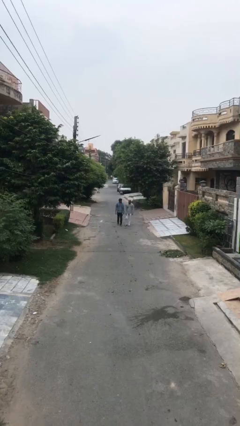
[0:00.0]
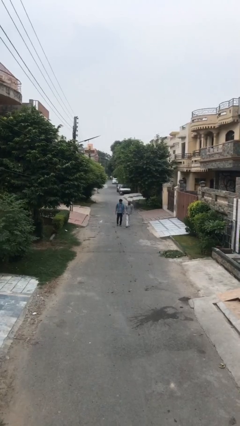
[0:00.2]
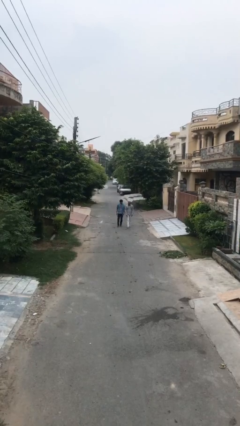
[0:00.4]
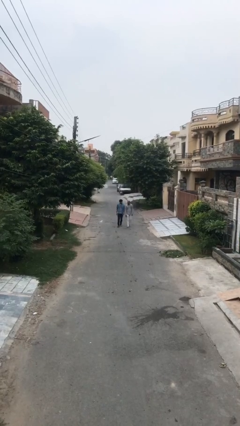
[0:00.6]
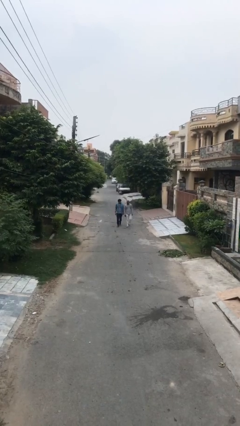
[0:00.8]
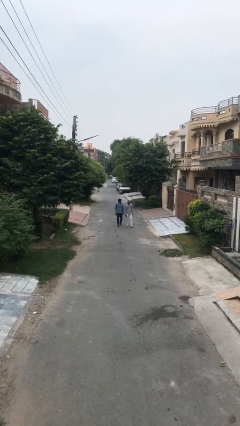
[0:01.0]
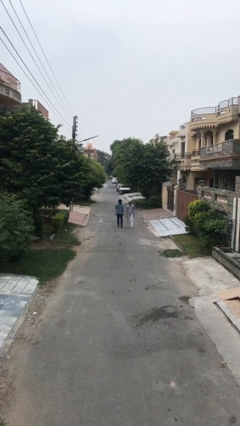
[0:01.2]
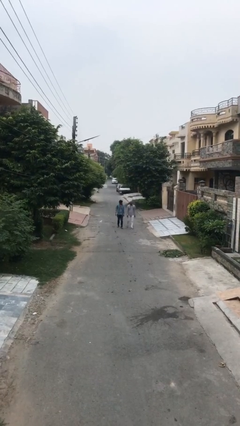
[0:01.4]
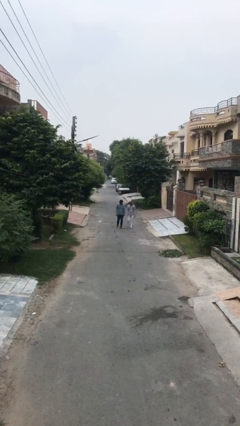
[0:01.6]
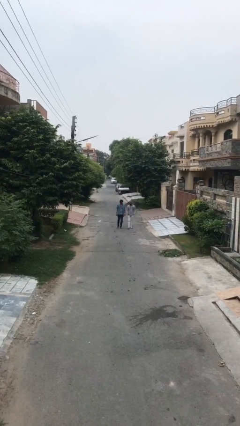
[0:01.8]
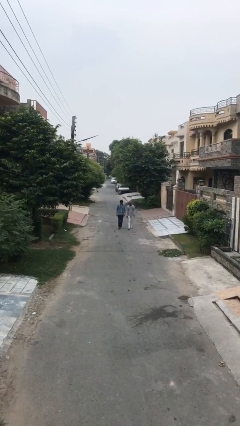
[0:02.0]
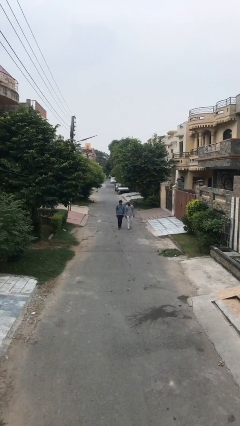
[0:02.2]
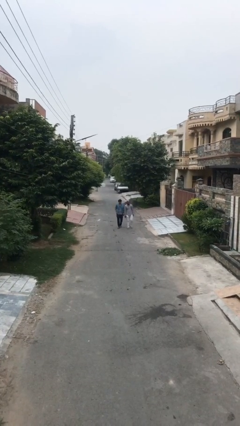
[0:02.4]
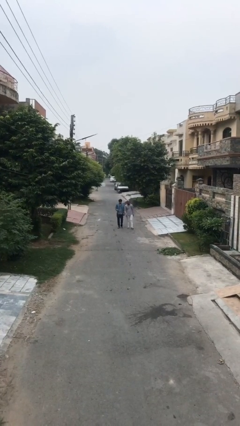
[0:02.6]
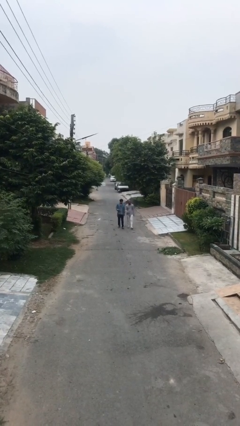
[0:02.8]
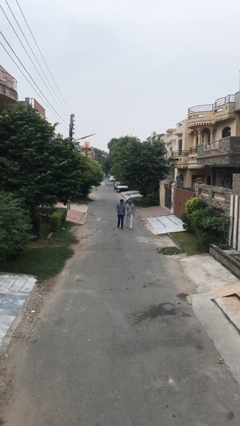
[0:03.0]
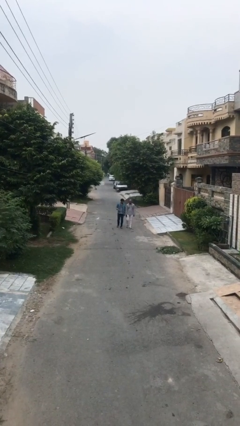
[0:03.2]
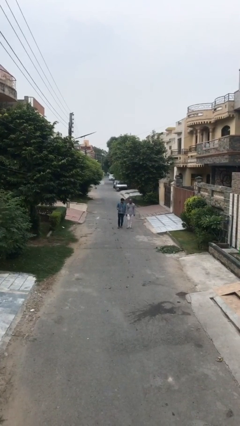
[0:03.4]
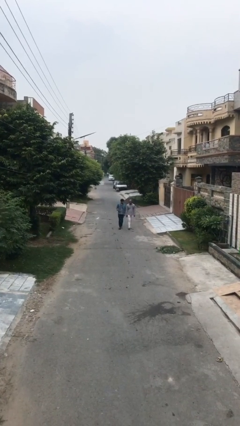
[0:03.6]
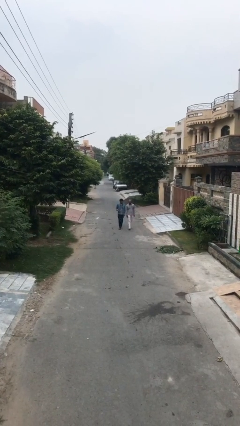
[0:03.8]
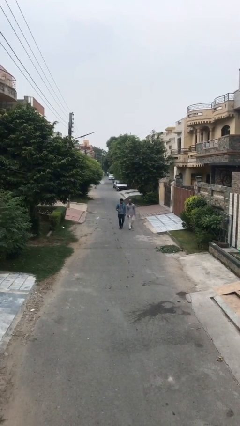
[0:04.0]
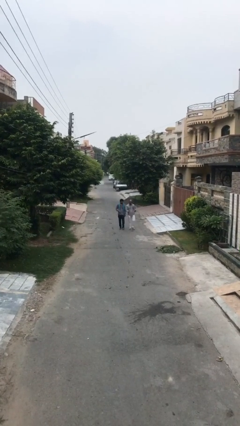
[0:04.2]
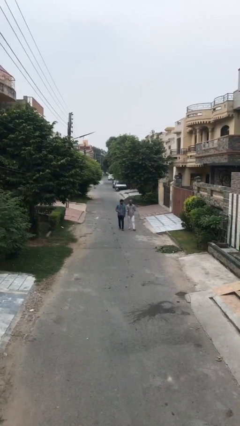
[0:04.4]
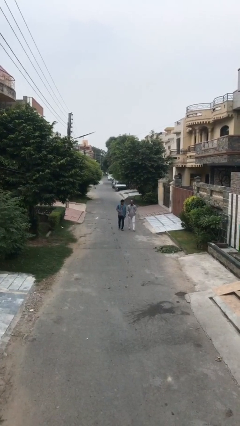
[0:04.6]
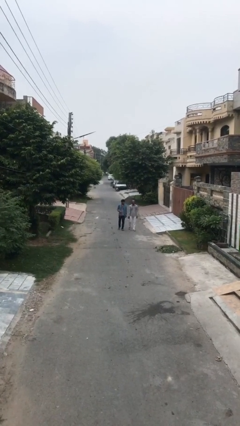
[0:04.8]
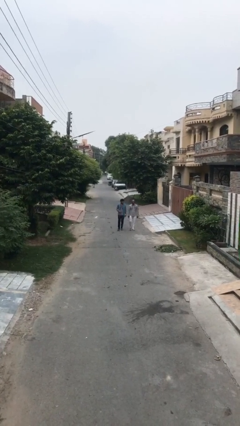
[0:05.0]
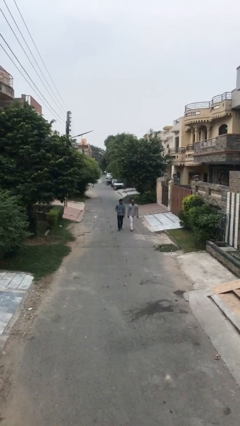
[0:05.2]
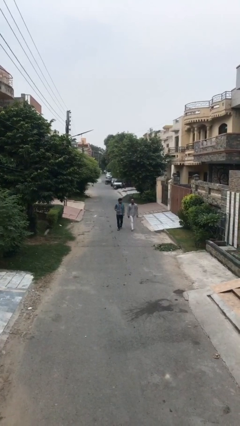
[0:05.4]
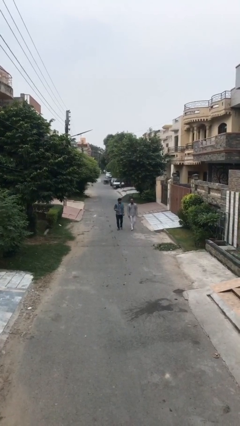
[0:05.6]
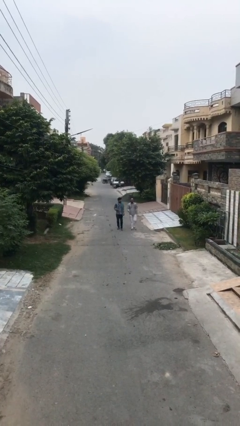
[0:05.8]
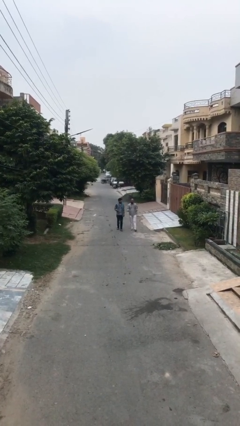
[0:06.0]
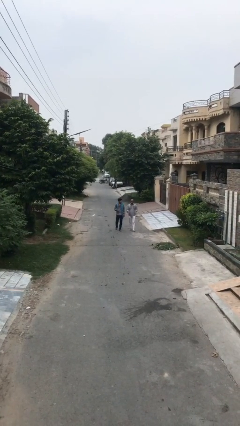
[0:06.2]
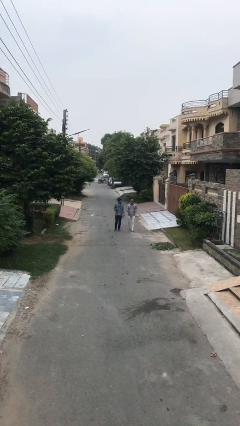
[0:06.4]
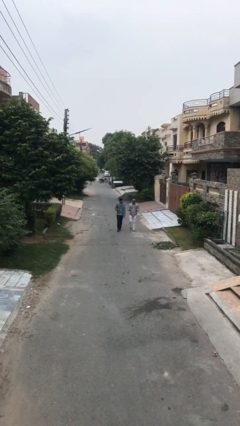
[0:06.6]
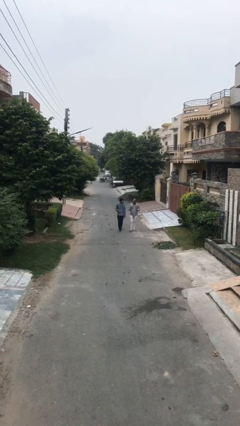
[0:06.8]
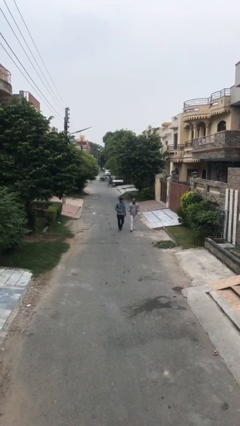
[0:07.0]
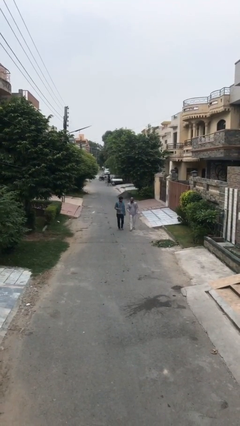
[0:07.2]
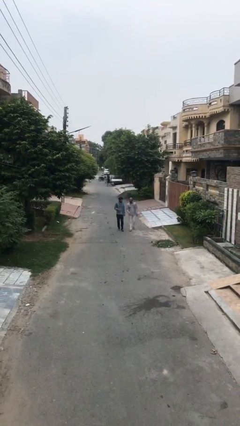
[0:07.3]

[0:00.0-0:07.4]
person talks to person

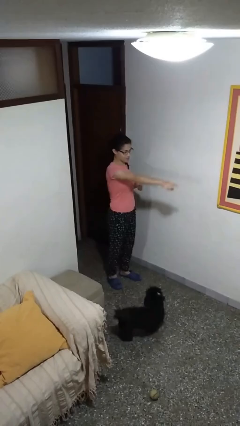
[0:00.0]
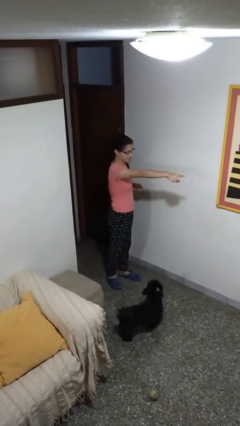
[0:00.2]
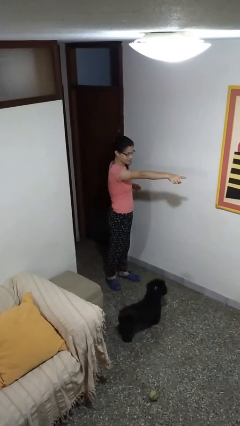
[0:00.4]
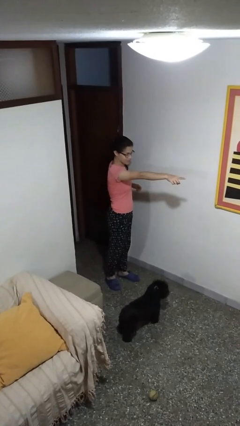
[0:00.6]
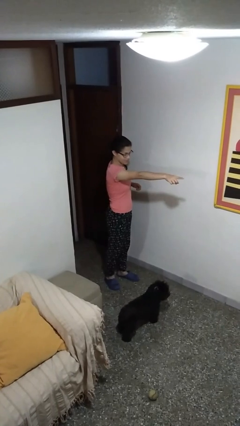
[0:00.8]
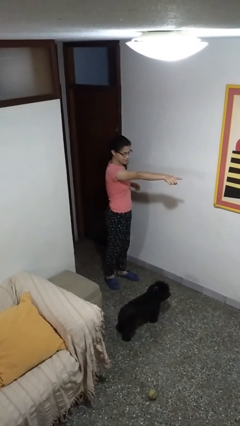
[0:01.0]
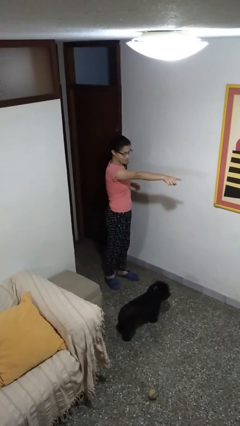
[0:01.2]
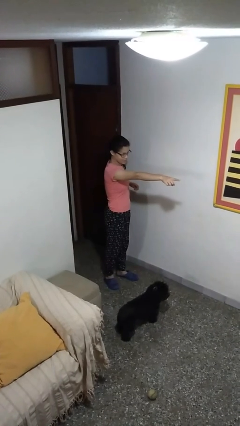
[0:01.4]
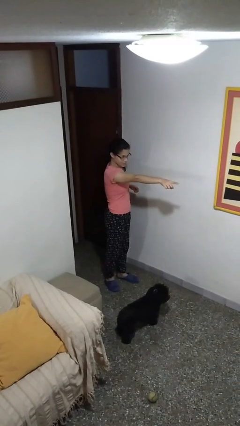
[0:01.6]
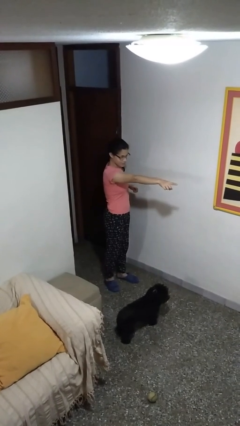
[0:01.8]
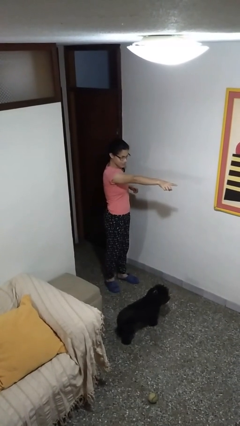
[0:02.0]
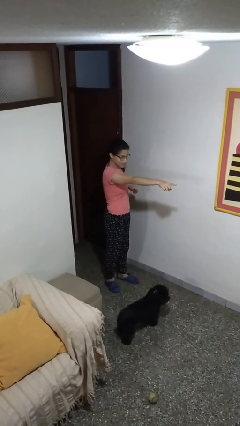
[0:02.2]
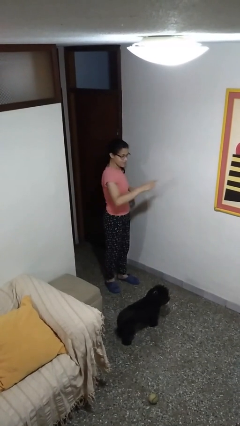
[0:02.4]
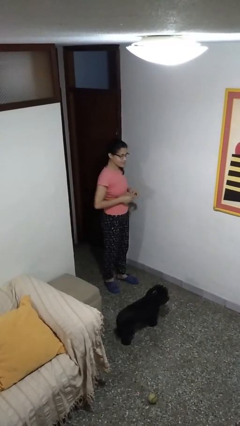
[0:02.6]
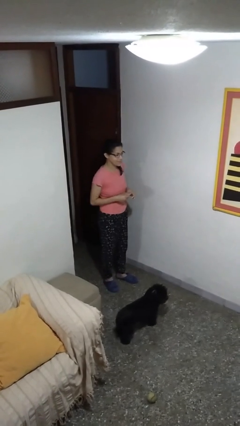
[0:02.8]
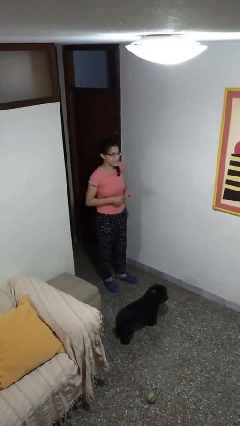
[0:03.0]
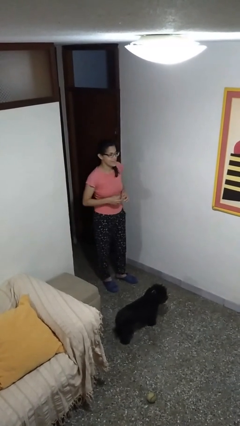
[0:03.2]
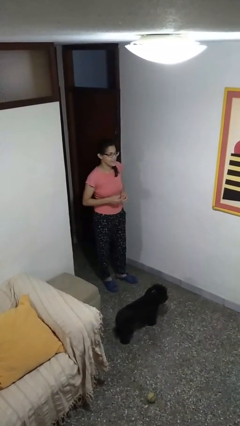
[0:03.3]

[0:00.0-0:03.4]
person points at person

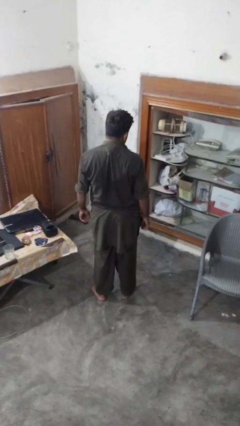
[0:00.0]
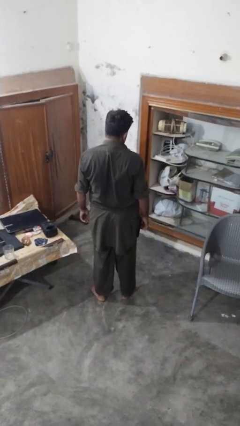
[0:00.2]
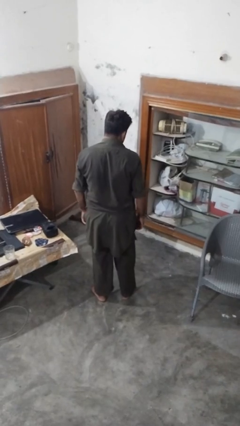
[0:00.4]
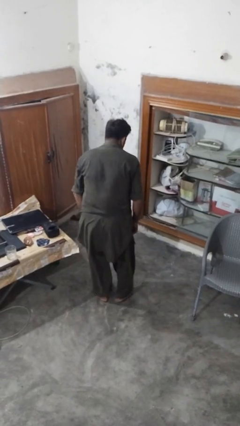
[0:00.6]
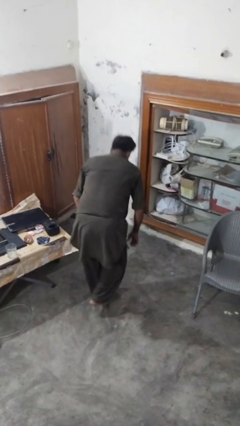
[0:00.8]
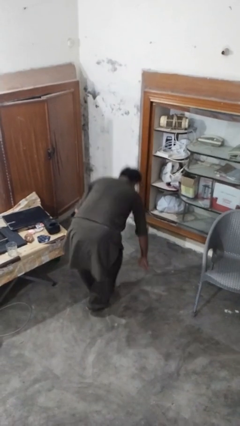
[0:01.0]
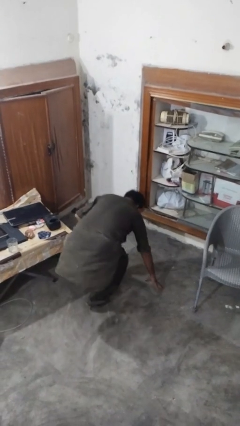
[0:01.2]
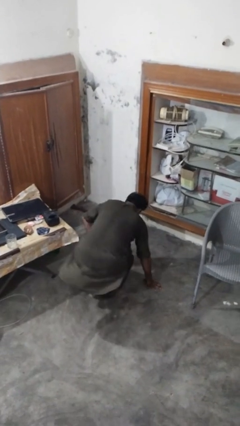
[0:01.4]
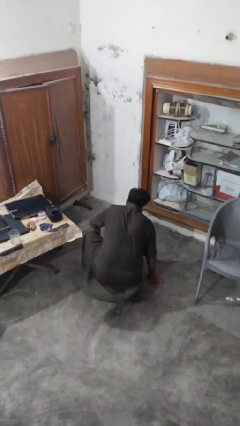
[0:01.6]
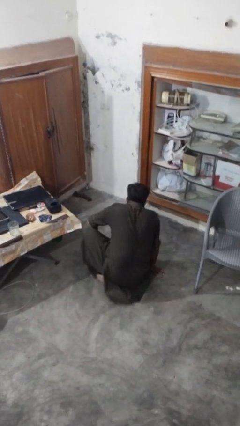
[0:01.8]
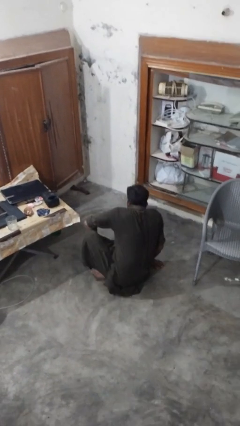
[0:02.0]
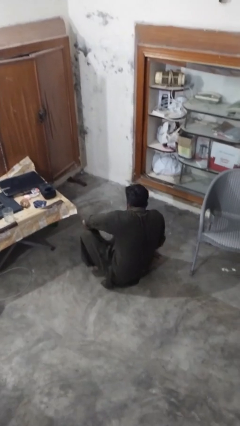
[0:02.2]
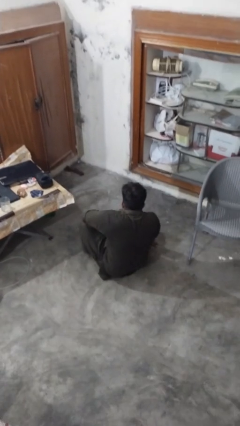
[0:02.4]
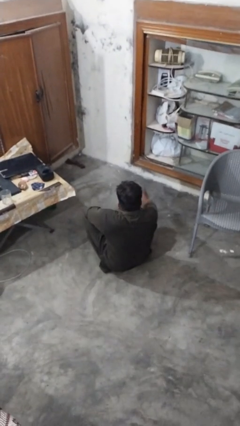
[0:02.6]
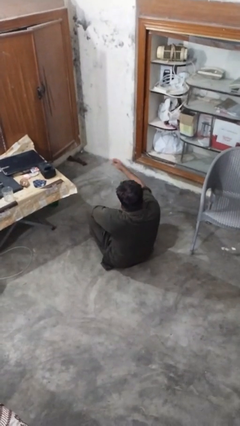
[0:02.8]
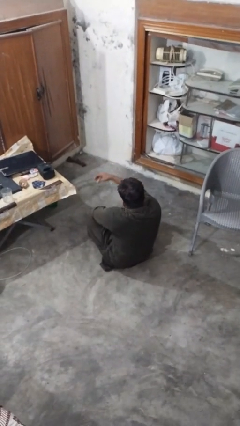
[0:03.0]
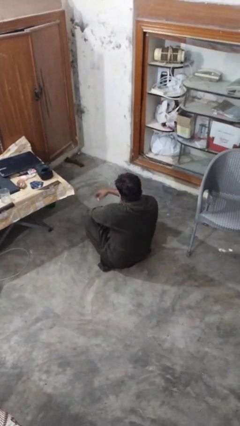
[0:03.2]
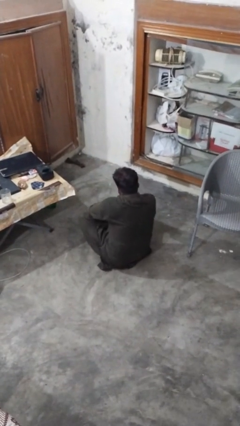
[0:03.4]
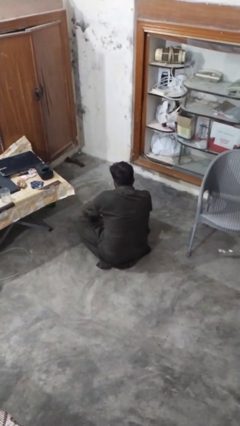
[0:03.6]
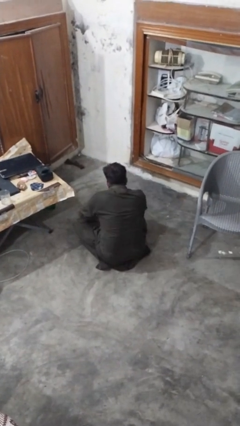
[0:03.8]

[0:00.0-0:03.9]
person sits crisscross

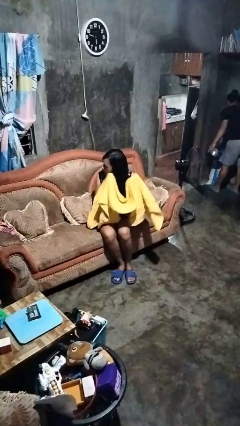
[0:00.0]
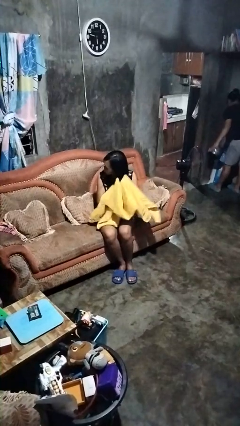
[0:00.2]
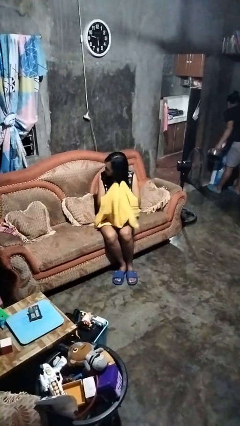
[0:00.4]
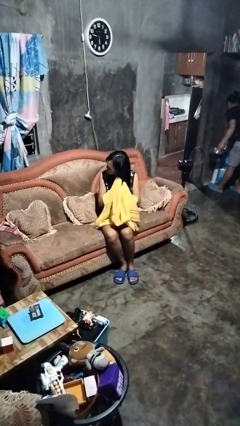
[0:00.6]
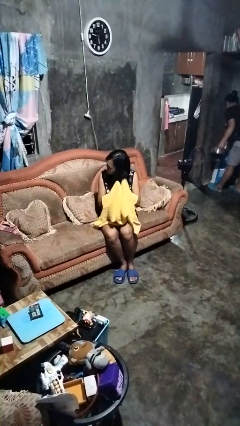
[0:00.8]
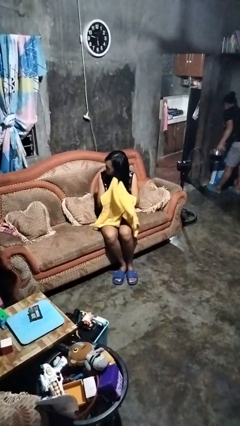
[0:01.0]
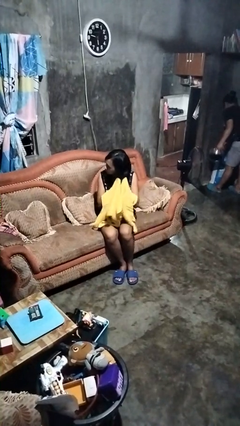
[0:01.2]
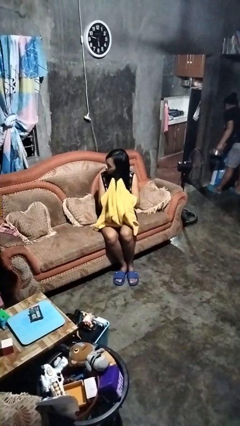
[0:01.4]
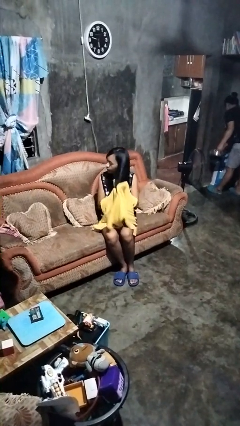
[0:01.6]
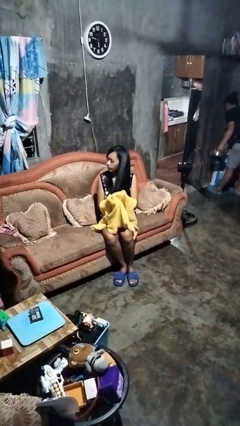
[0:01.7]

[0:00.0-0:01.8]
person dries hair with towel

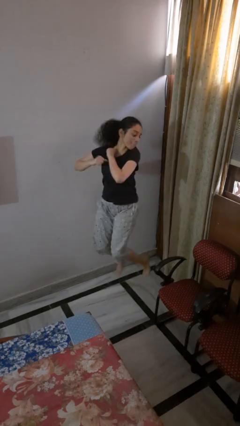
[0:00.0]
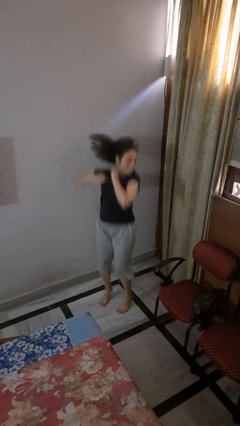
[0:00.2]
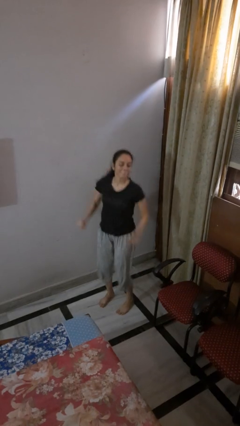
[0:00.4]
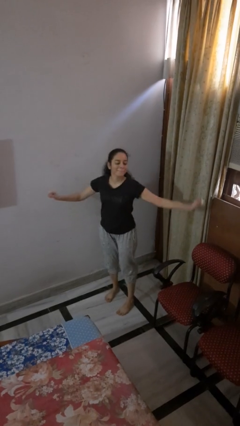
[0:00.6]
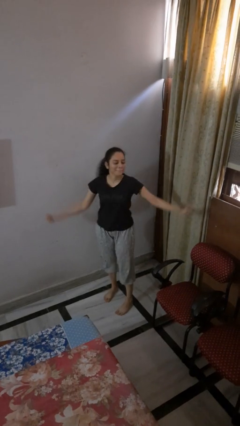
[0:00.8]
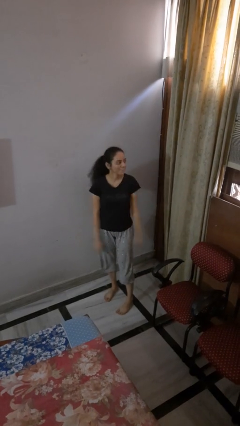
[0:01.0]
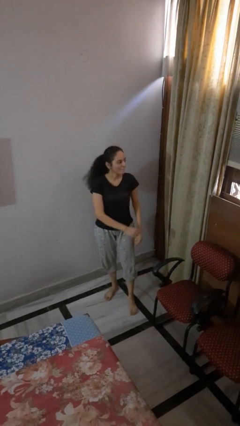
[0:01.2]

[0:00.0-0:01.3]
person jumps

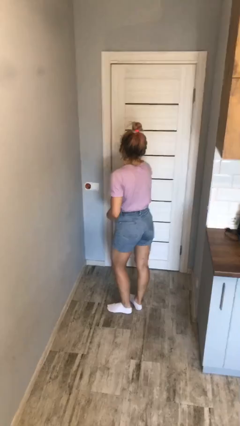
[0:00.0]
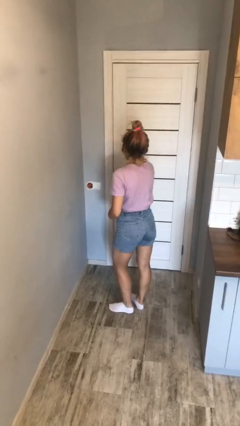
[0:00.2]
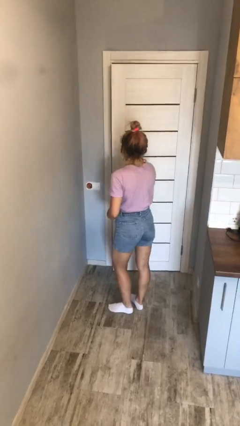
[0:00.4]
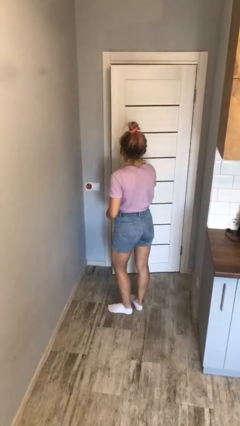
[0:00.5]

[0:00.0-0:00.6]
person opens facility door
